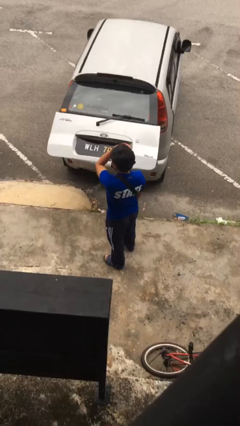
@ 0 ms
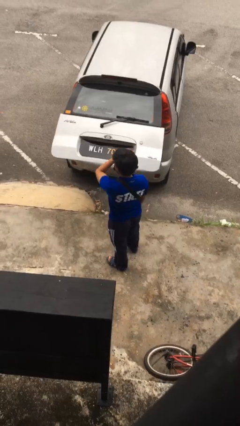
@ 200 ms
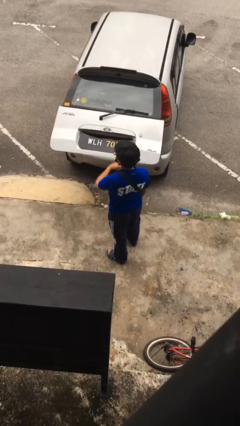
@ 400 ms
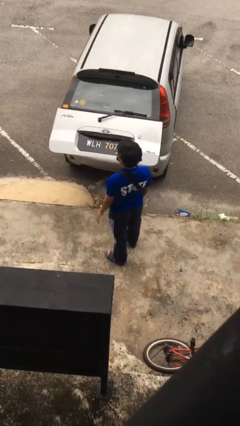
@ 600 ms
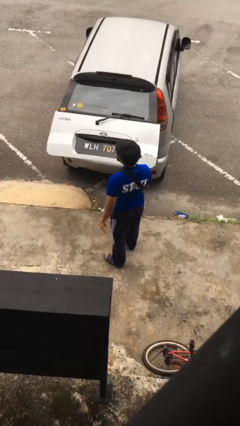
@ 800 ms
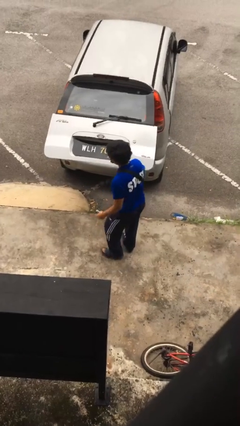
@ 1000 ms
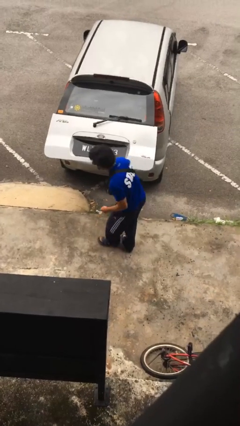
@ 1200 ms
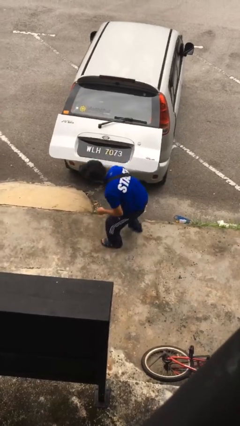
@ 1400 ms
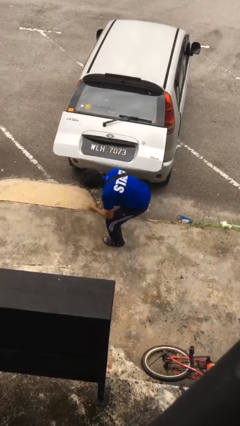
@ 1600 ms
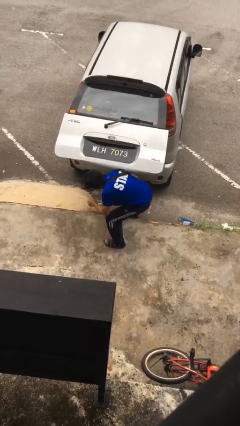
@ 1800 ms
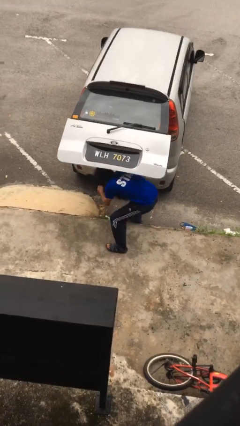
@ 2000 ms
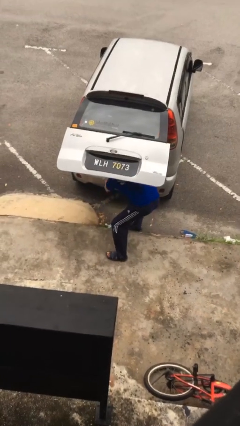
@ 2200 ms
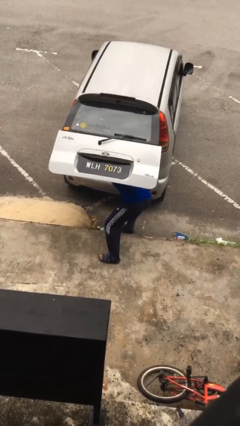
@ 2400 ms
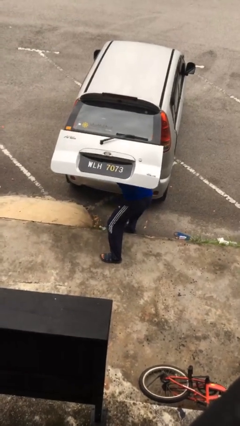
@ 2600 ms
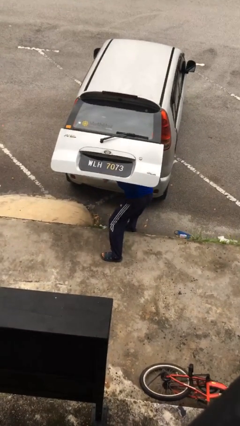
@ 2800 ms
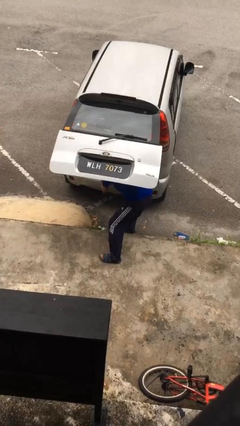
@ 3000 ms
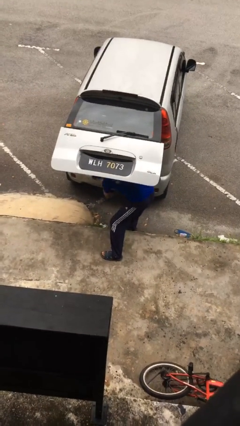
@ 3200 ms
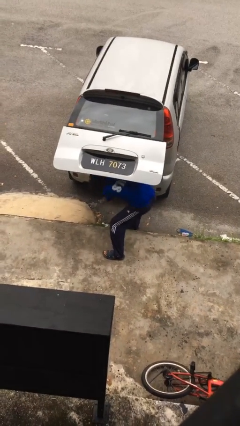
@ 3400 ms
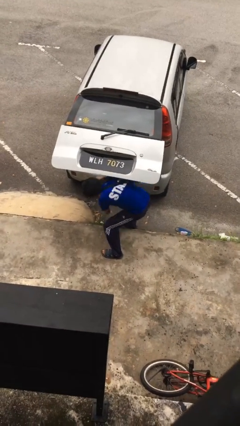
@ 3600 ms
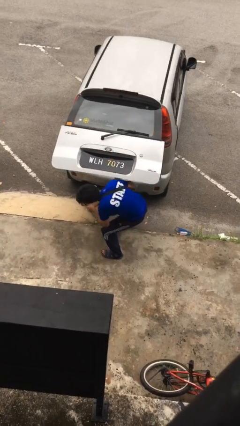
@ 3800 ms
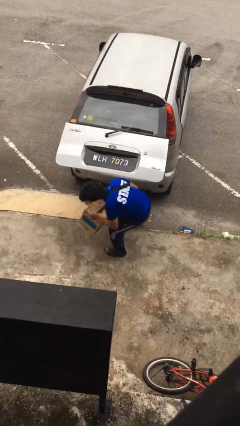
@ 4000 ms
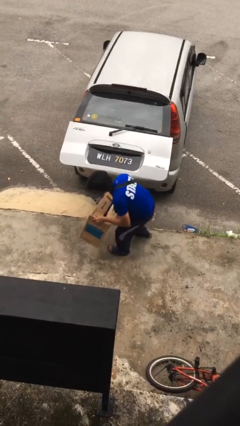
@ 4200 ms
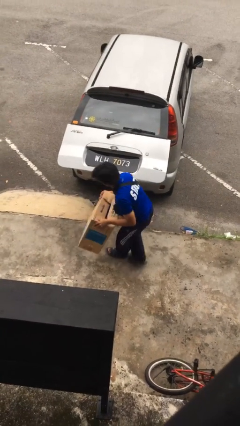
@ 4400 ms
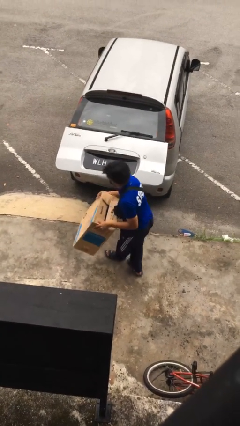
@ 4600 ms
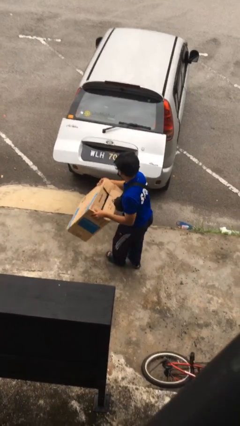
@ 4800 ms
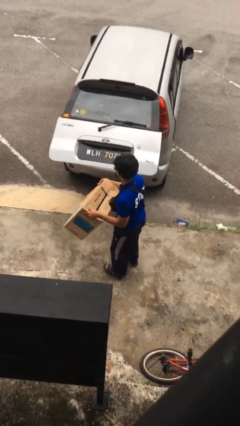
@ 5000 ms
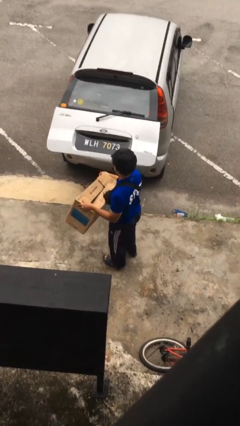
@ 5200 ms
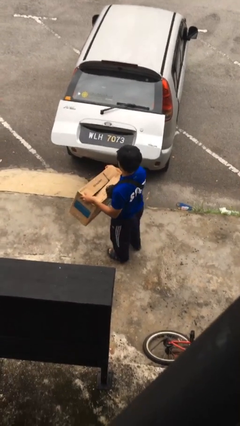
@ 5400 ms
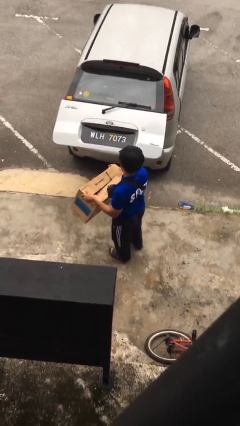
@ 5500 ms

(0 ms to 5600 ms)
person unloads car

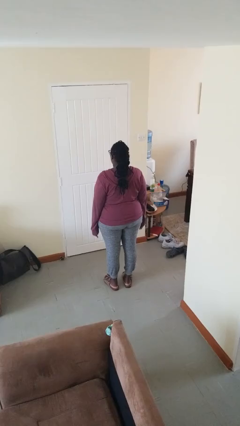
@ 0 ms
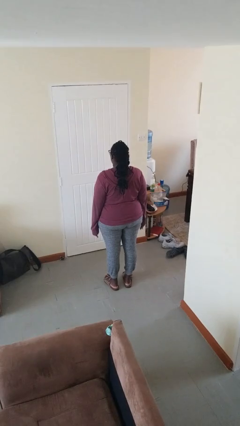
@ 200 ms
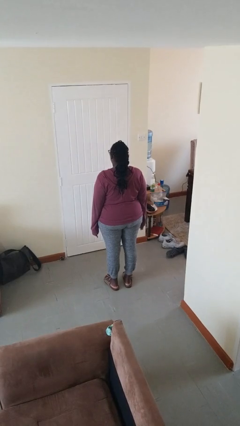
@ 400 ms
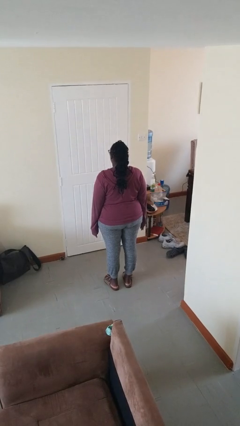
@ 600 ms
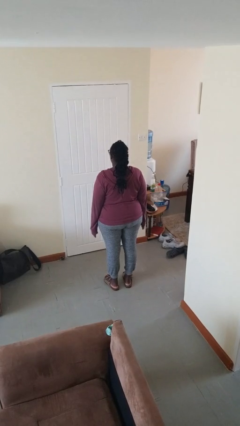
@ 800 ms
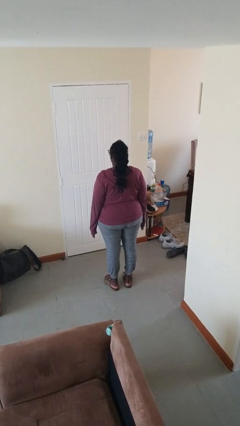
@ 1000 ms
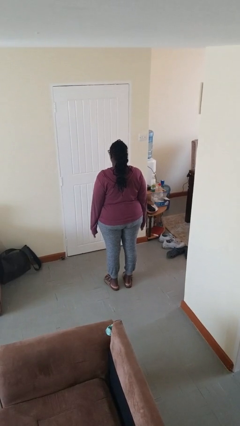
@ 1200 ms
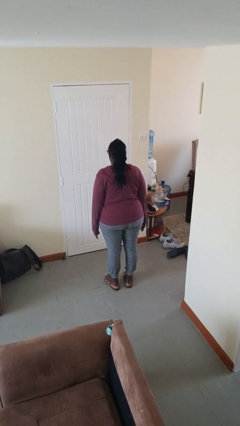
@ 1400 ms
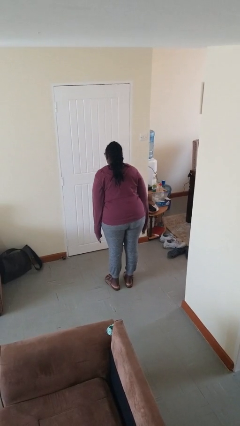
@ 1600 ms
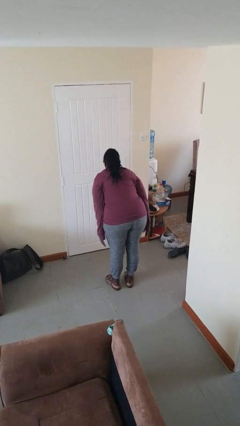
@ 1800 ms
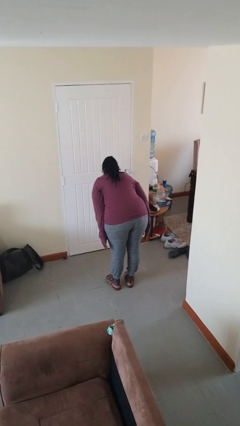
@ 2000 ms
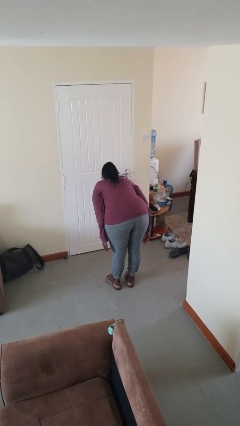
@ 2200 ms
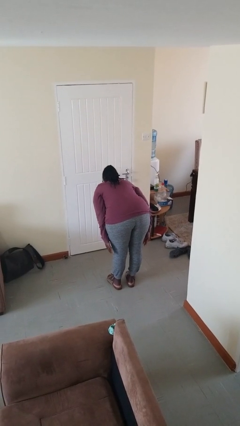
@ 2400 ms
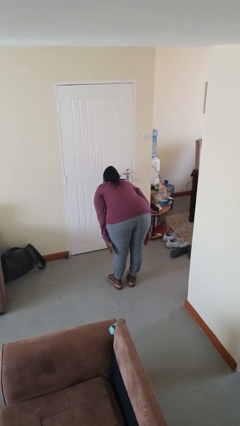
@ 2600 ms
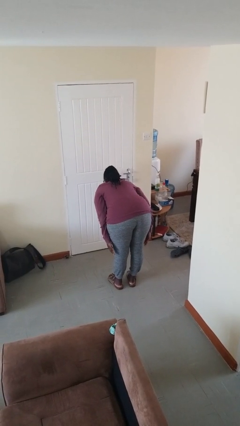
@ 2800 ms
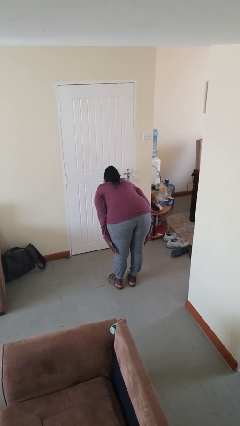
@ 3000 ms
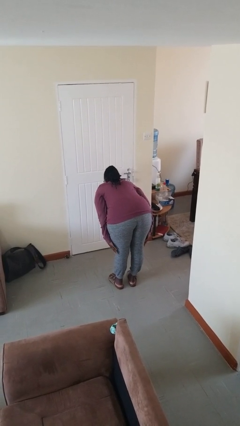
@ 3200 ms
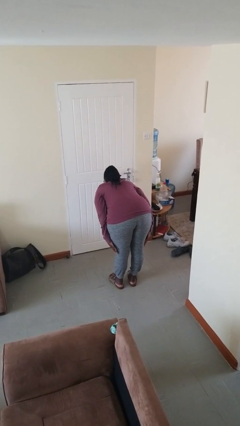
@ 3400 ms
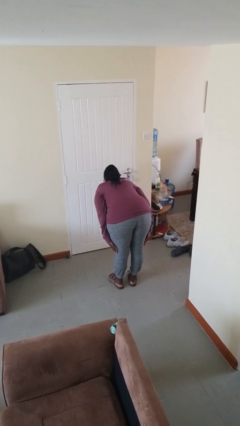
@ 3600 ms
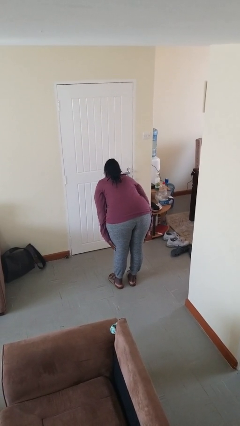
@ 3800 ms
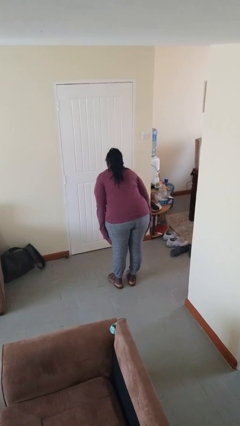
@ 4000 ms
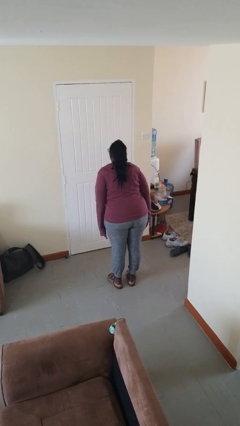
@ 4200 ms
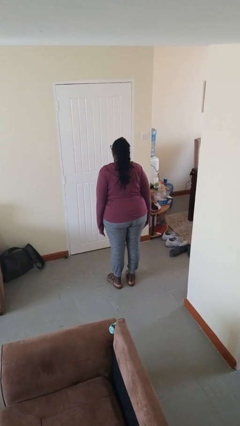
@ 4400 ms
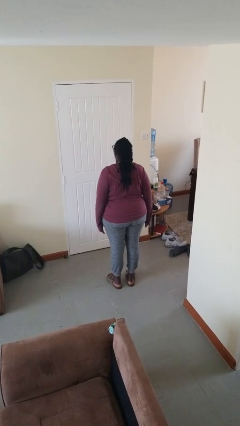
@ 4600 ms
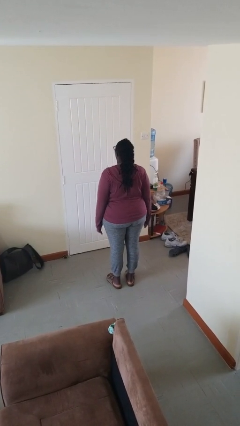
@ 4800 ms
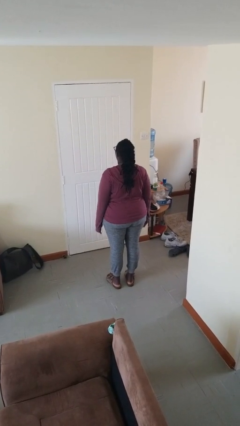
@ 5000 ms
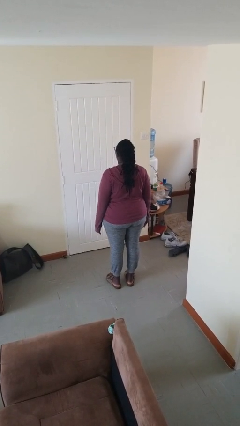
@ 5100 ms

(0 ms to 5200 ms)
person bows

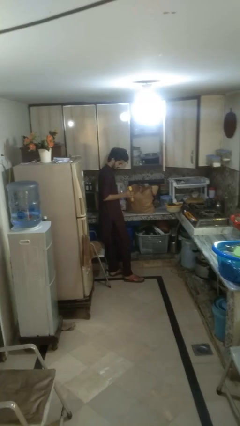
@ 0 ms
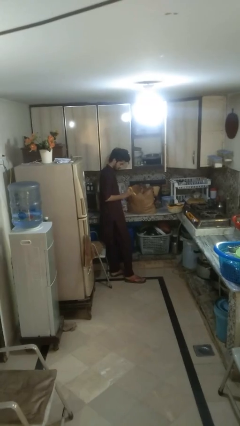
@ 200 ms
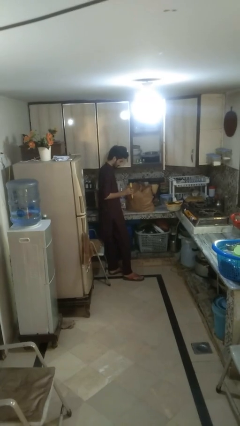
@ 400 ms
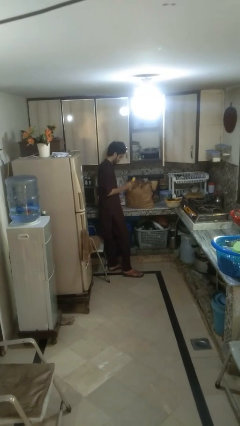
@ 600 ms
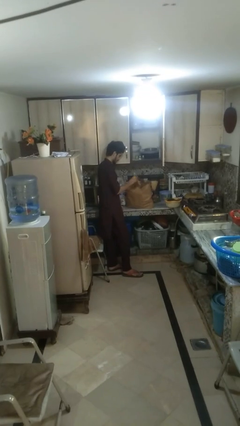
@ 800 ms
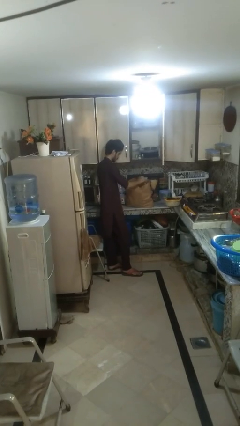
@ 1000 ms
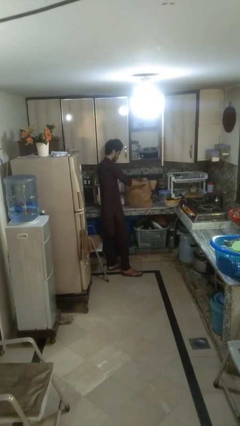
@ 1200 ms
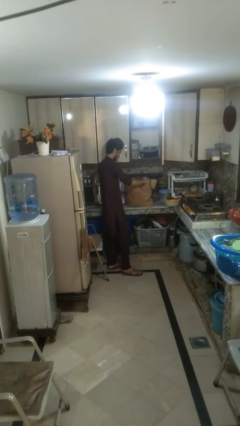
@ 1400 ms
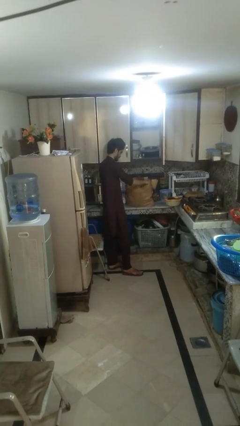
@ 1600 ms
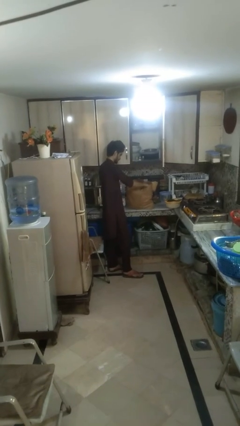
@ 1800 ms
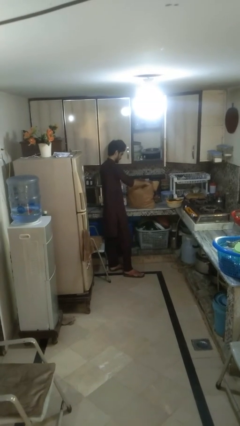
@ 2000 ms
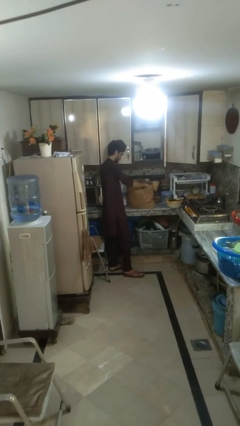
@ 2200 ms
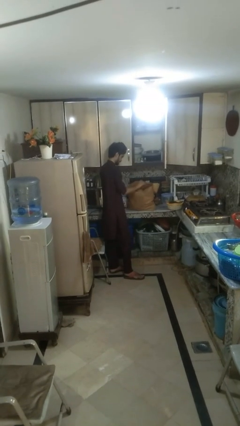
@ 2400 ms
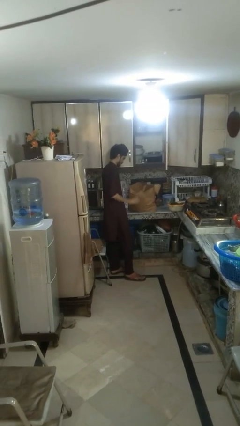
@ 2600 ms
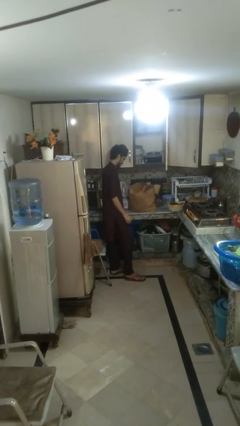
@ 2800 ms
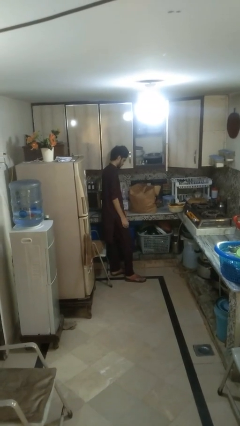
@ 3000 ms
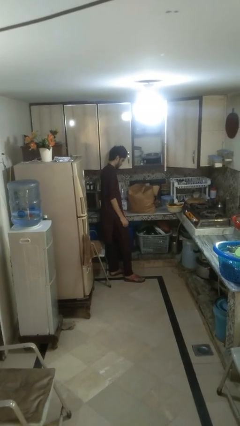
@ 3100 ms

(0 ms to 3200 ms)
person puts object into bag

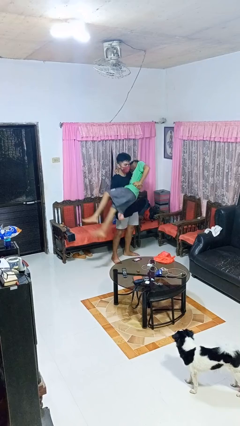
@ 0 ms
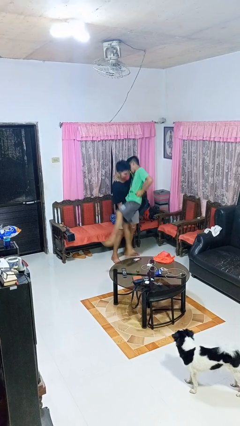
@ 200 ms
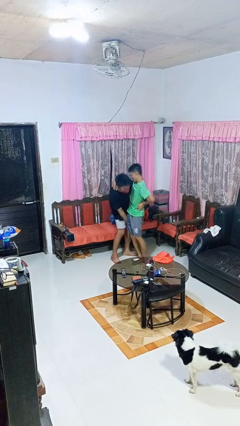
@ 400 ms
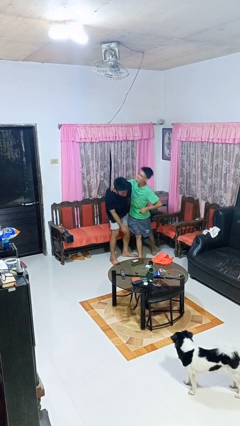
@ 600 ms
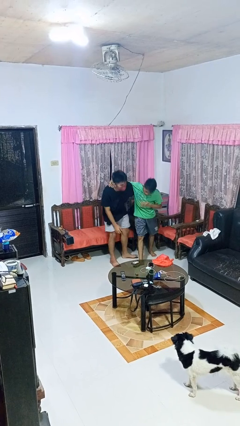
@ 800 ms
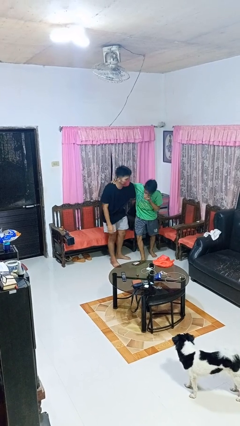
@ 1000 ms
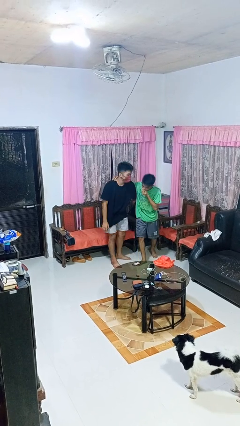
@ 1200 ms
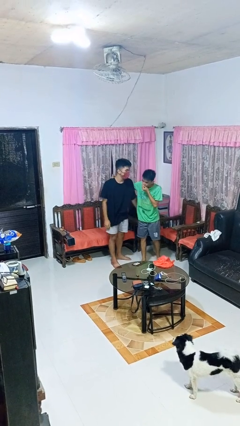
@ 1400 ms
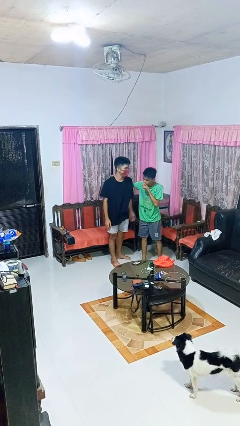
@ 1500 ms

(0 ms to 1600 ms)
person puts down person

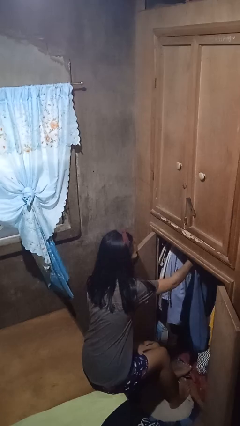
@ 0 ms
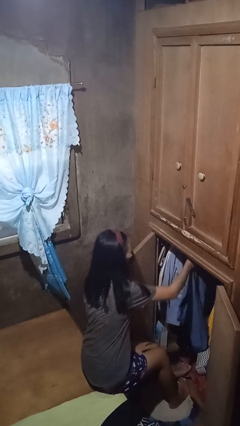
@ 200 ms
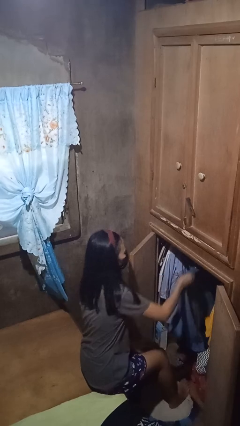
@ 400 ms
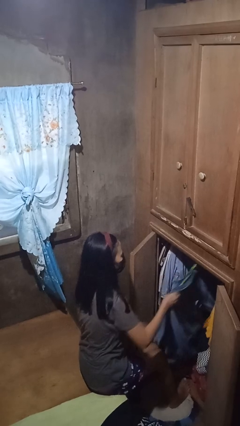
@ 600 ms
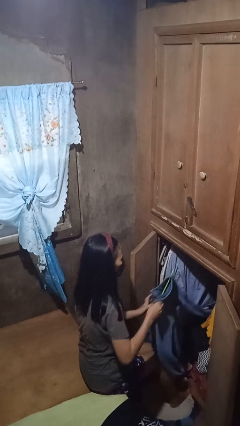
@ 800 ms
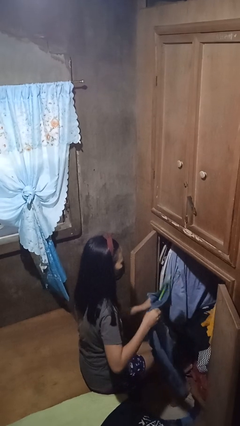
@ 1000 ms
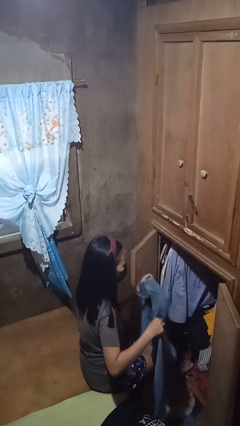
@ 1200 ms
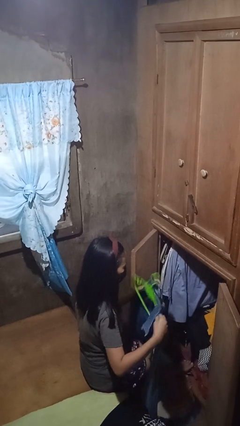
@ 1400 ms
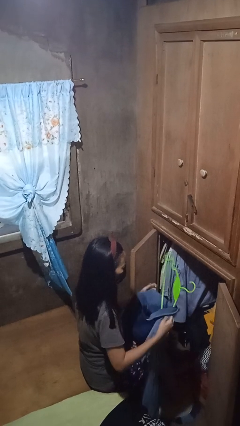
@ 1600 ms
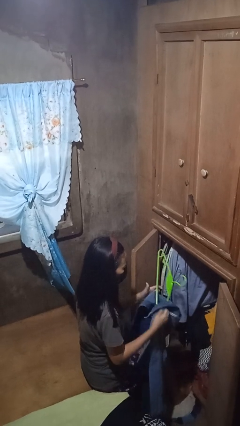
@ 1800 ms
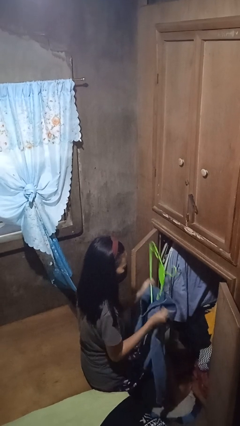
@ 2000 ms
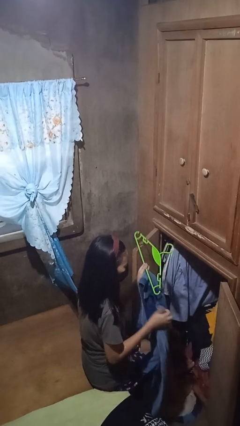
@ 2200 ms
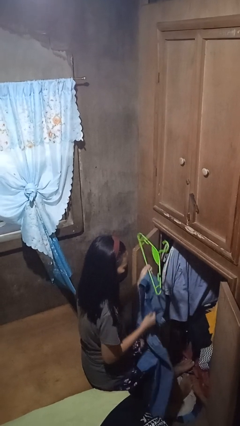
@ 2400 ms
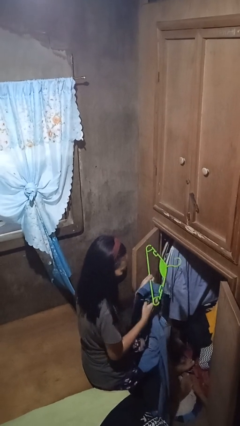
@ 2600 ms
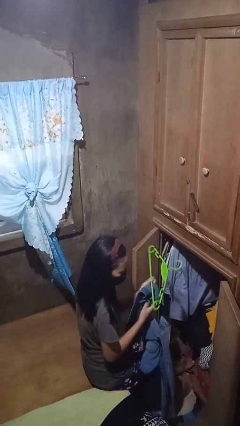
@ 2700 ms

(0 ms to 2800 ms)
person takes clothes from closet
